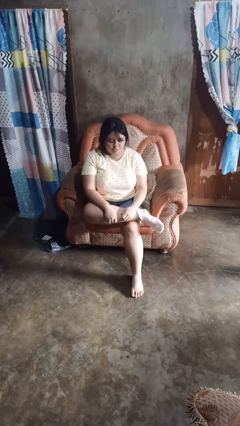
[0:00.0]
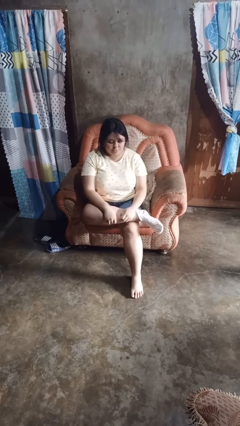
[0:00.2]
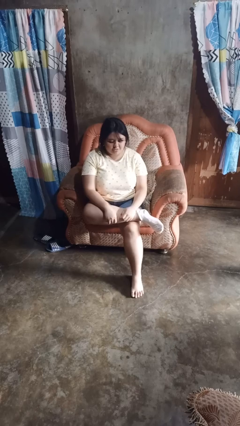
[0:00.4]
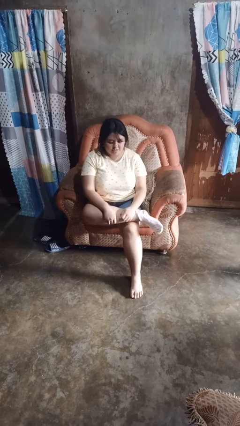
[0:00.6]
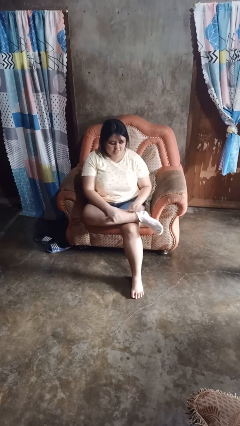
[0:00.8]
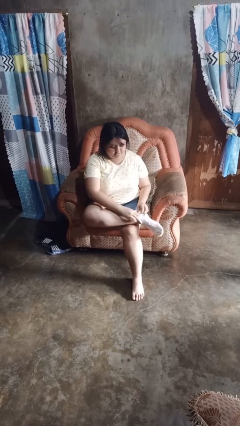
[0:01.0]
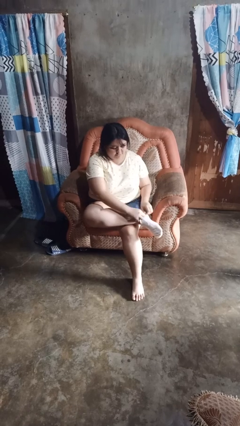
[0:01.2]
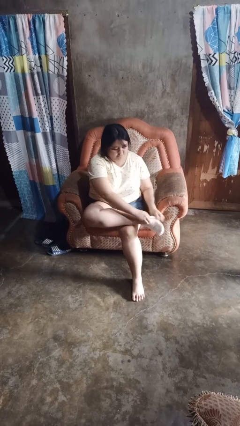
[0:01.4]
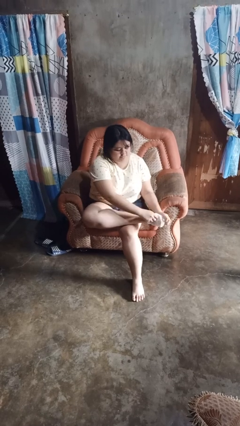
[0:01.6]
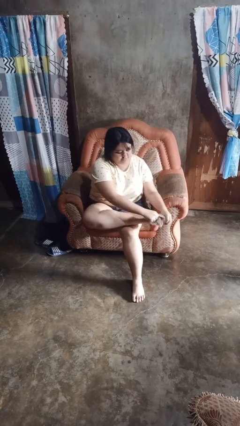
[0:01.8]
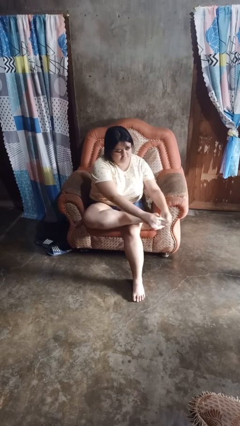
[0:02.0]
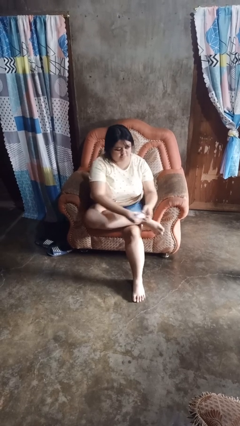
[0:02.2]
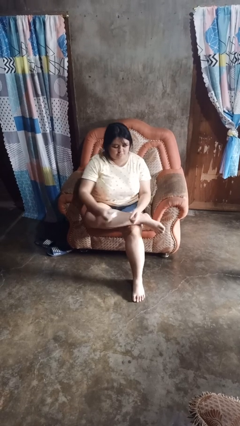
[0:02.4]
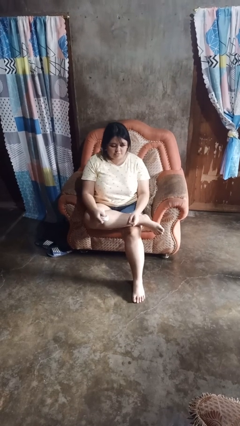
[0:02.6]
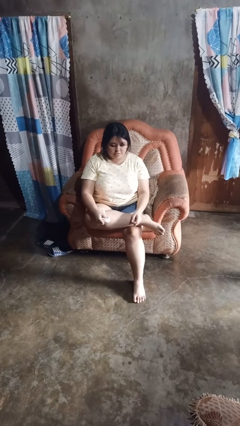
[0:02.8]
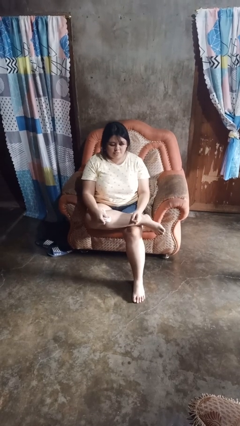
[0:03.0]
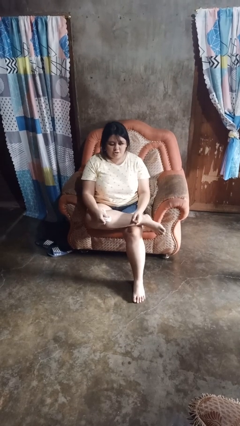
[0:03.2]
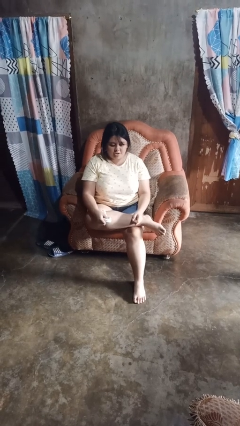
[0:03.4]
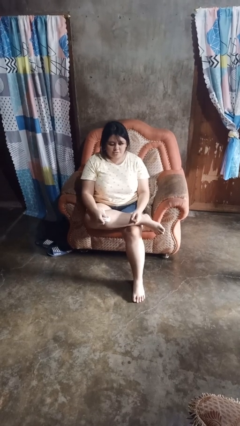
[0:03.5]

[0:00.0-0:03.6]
person takes off socks

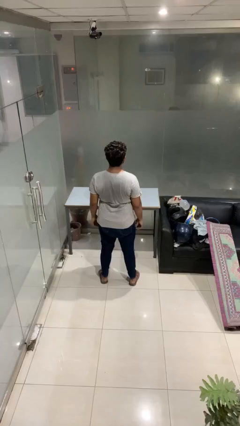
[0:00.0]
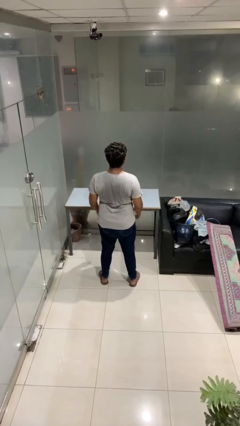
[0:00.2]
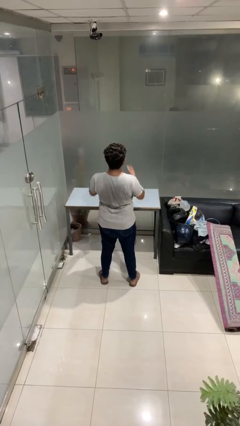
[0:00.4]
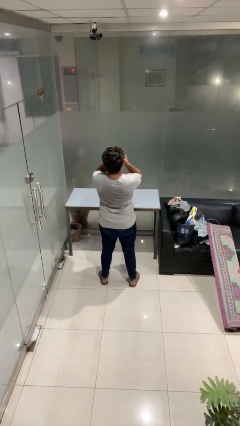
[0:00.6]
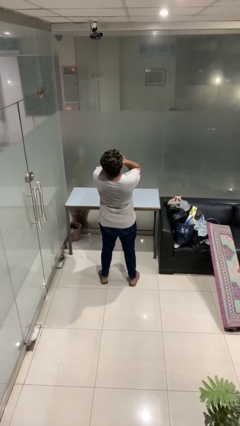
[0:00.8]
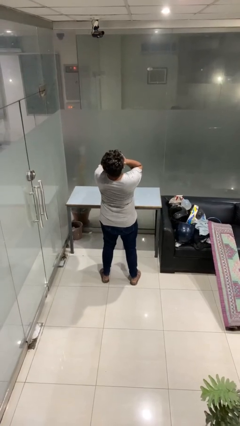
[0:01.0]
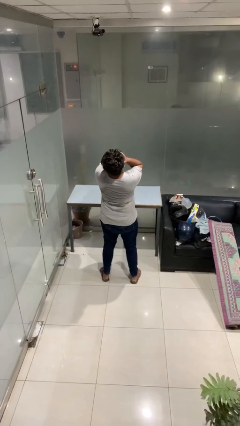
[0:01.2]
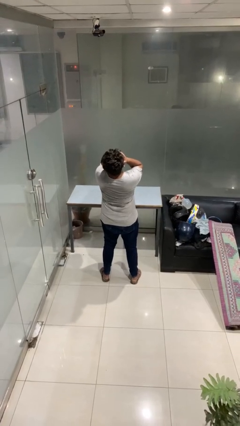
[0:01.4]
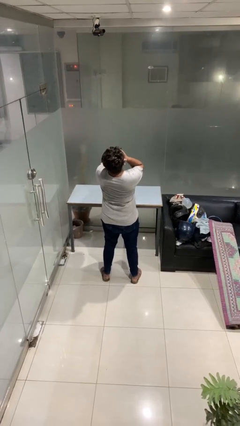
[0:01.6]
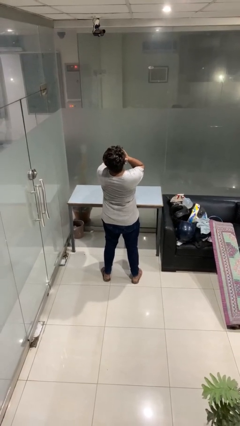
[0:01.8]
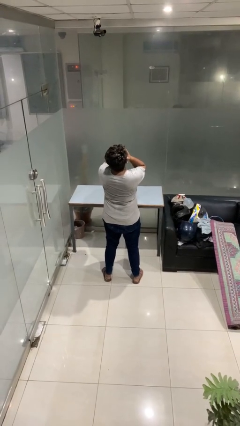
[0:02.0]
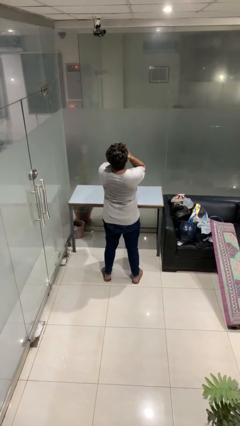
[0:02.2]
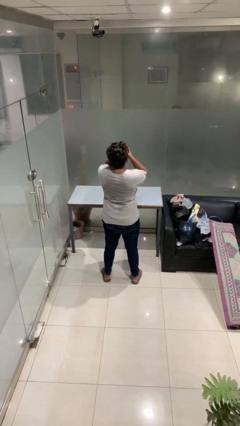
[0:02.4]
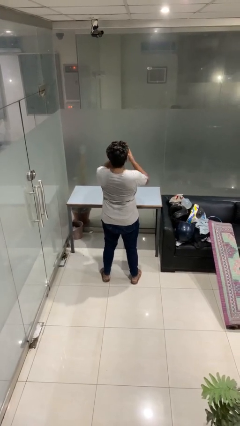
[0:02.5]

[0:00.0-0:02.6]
person covers face with hands

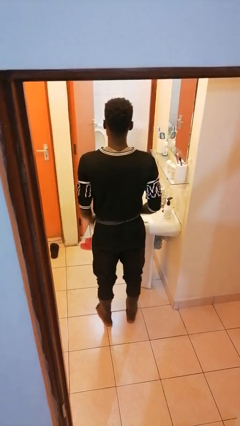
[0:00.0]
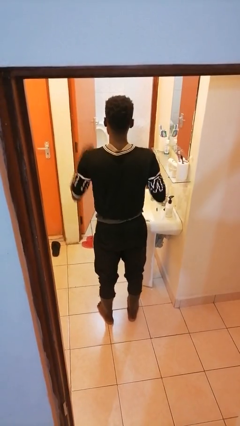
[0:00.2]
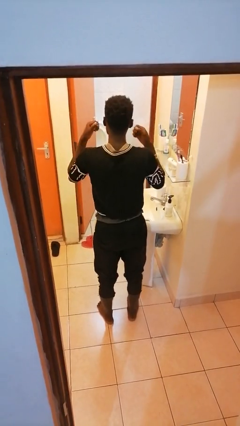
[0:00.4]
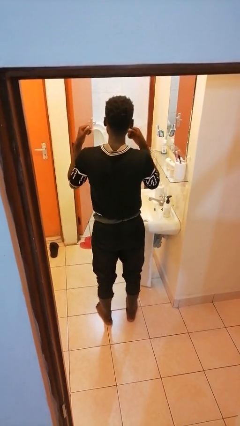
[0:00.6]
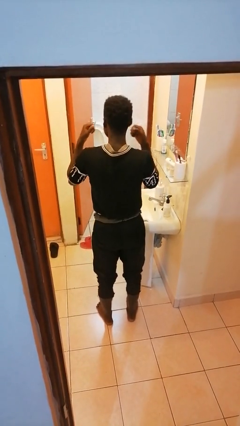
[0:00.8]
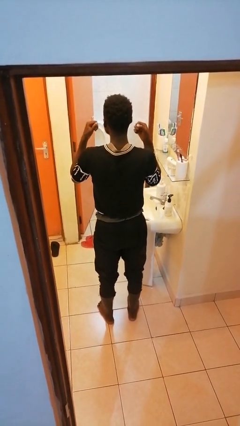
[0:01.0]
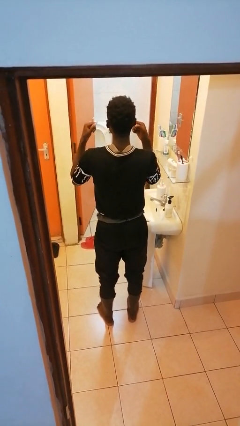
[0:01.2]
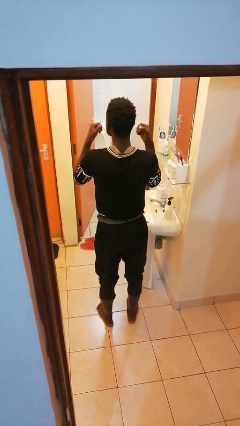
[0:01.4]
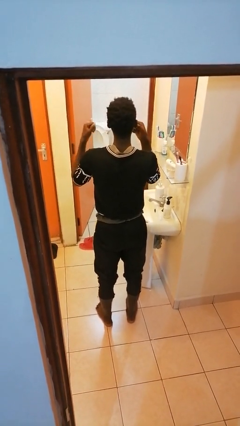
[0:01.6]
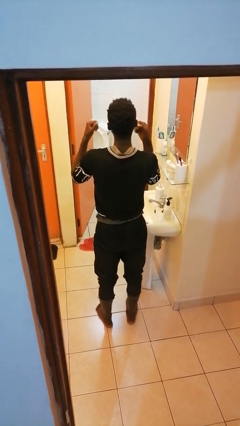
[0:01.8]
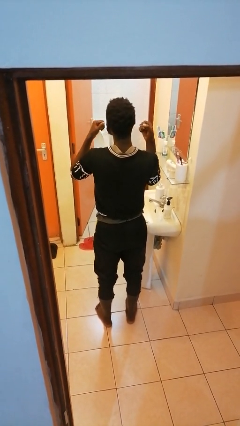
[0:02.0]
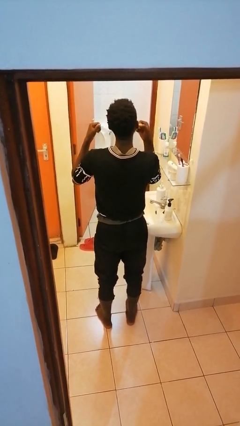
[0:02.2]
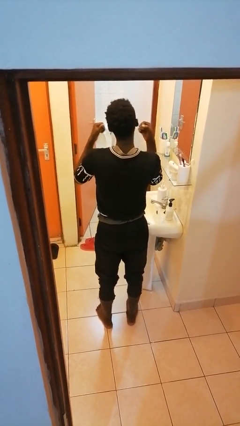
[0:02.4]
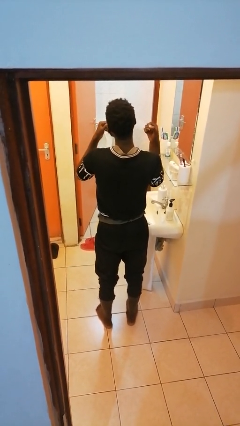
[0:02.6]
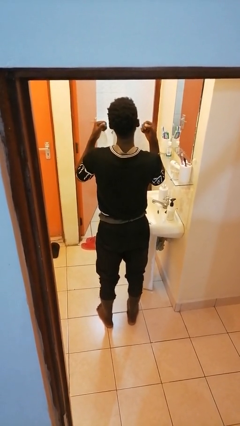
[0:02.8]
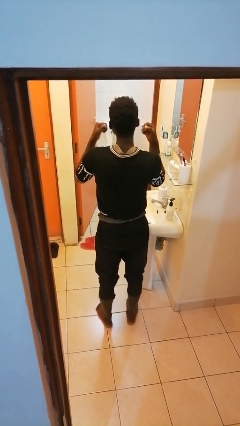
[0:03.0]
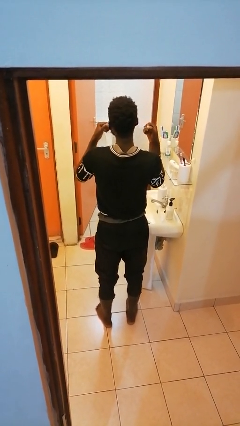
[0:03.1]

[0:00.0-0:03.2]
person flosses

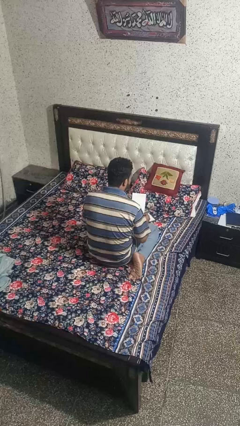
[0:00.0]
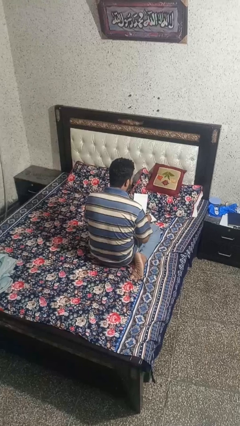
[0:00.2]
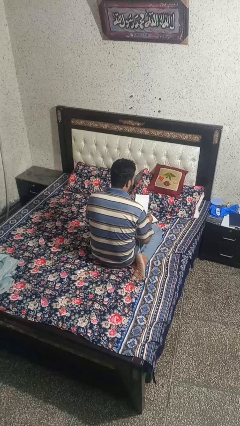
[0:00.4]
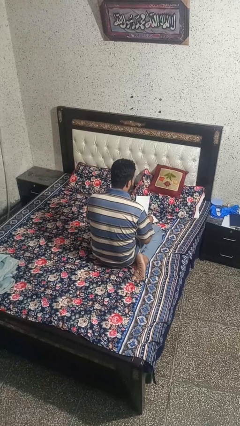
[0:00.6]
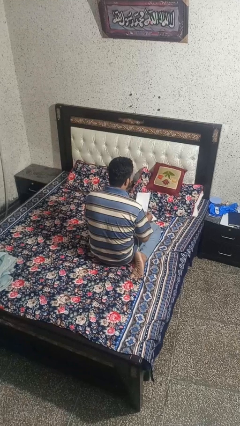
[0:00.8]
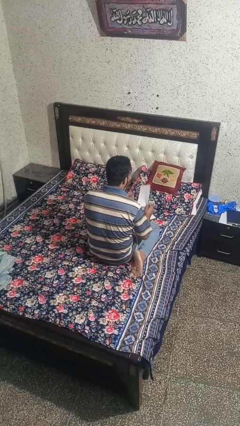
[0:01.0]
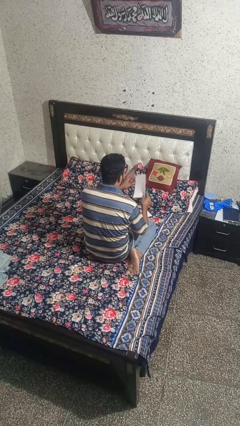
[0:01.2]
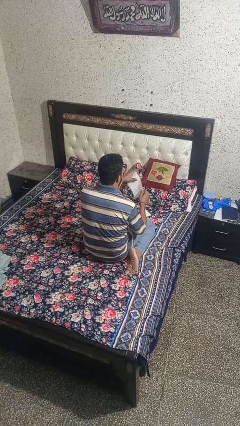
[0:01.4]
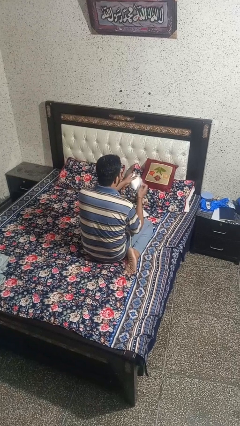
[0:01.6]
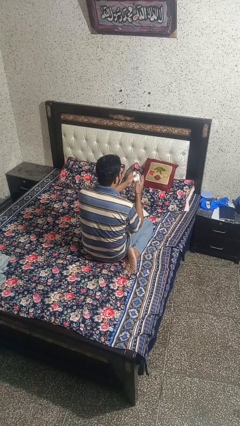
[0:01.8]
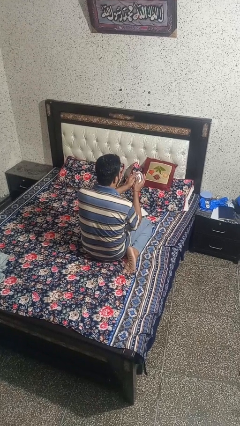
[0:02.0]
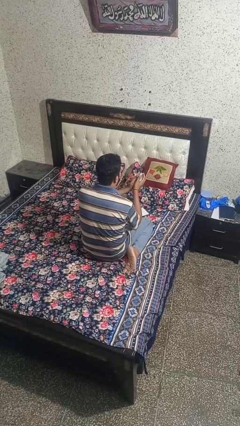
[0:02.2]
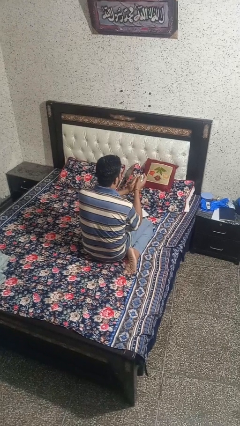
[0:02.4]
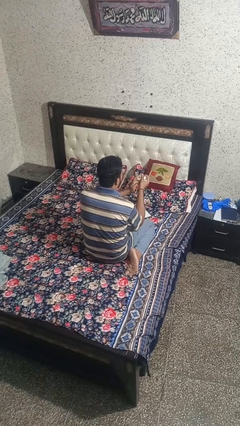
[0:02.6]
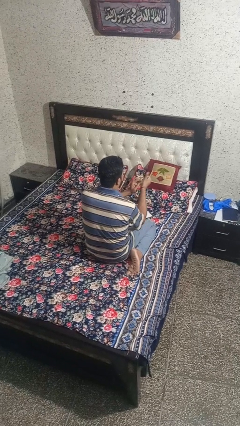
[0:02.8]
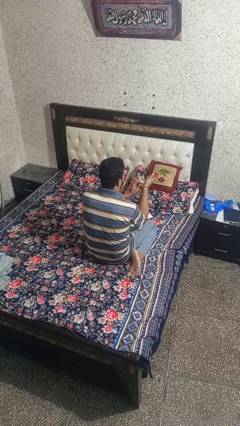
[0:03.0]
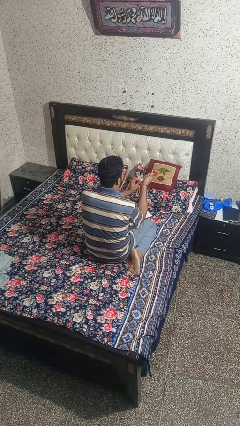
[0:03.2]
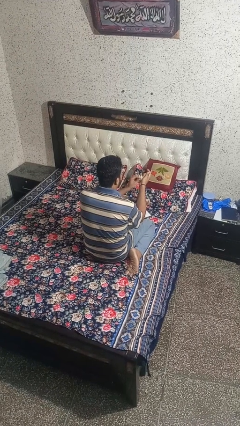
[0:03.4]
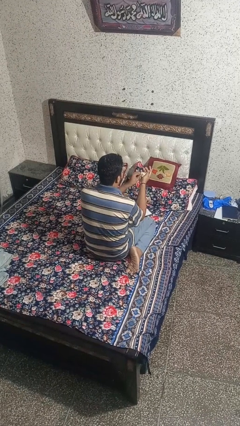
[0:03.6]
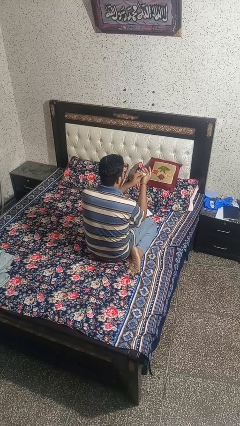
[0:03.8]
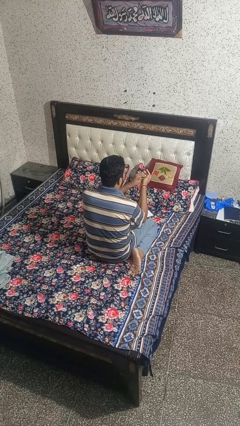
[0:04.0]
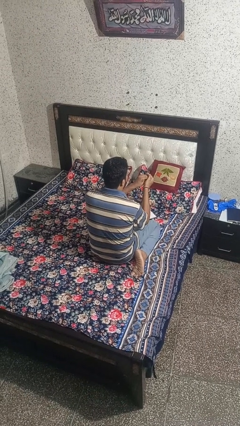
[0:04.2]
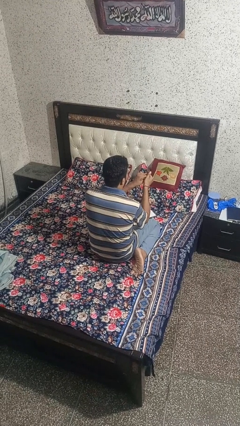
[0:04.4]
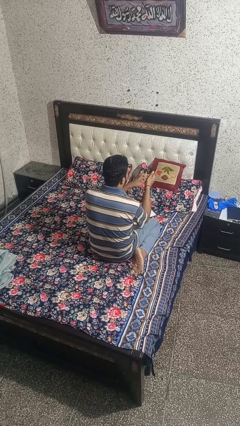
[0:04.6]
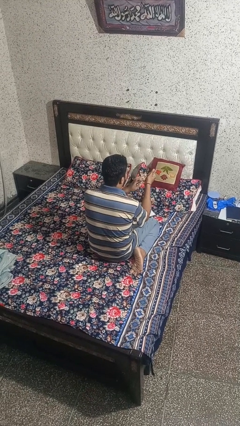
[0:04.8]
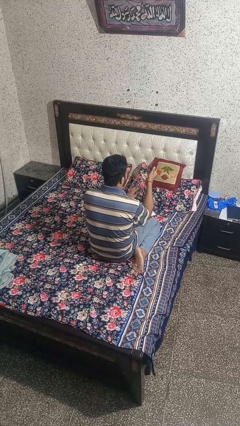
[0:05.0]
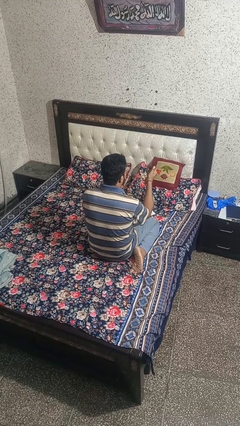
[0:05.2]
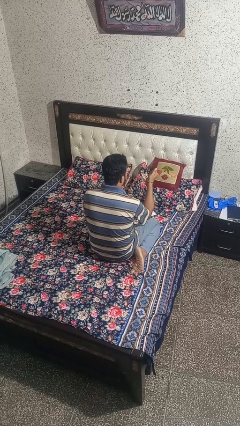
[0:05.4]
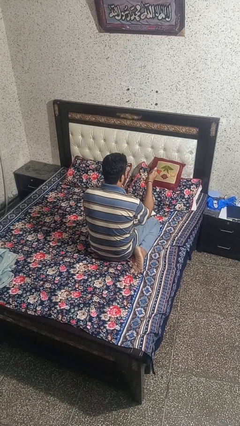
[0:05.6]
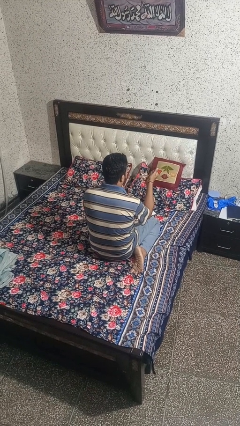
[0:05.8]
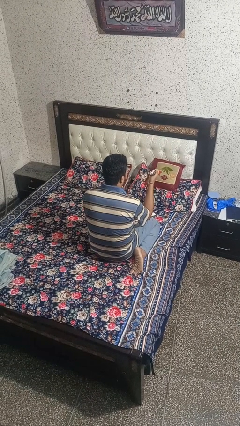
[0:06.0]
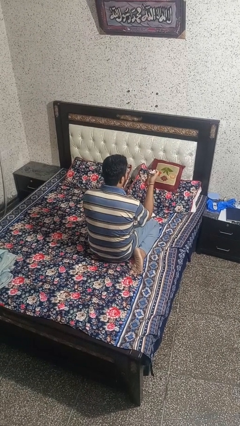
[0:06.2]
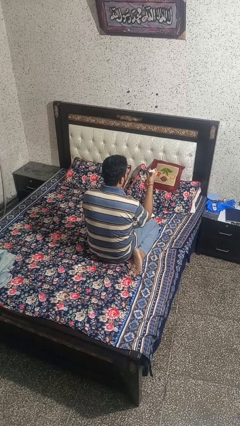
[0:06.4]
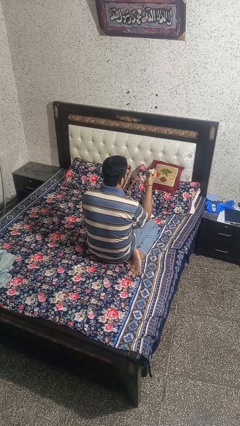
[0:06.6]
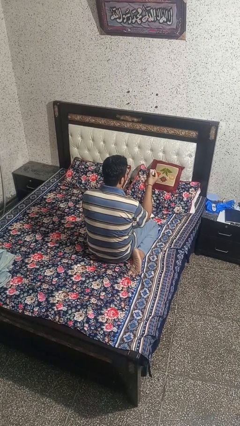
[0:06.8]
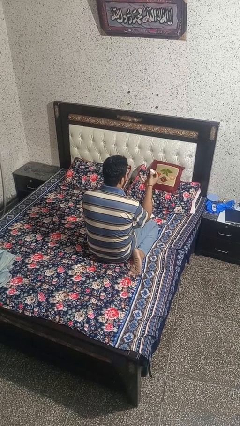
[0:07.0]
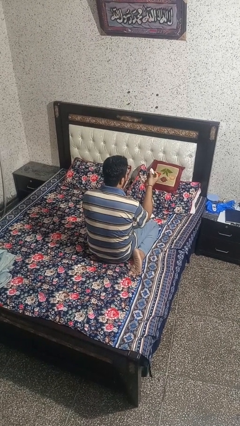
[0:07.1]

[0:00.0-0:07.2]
person crumples paper

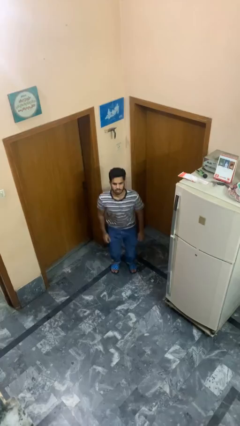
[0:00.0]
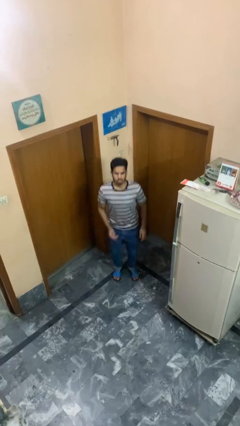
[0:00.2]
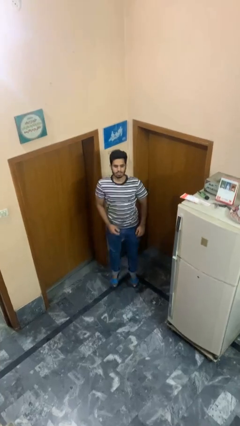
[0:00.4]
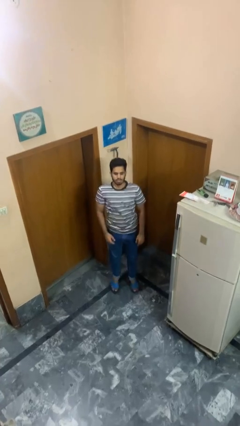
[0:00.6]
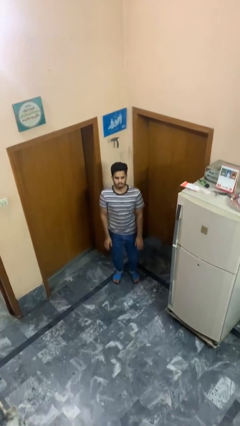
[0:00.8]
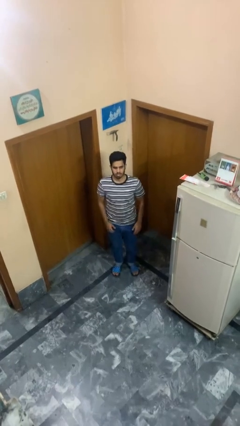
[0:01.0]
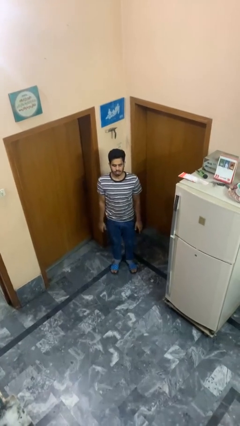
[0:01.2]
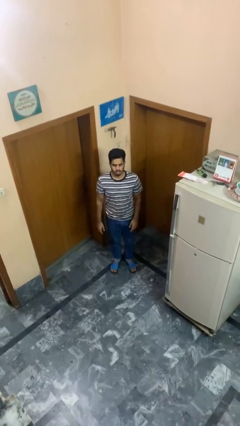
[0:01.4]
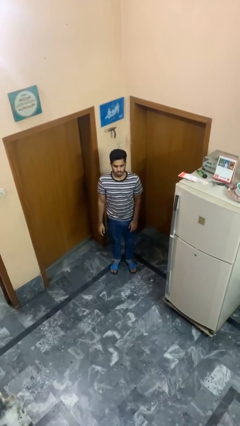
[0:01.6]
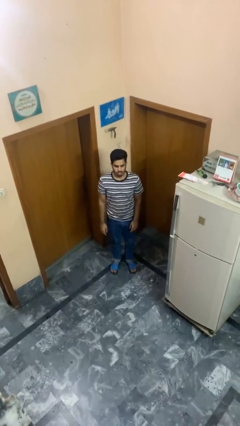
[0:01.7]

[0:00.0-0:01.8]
person jumps
